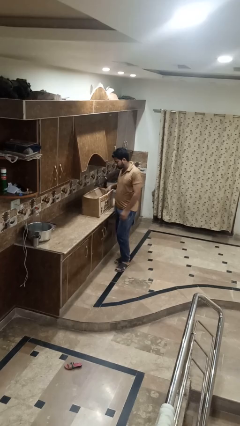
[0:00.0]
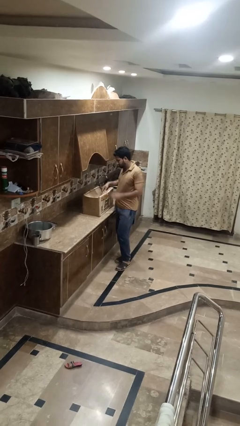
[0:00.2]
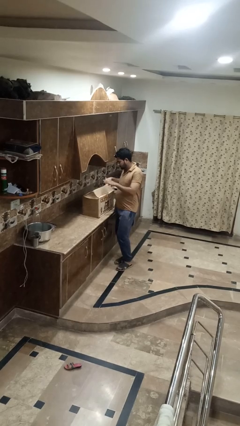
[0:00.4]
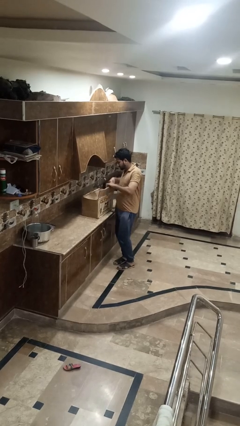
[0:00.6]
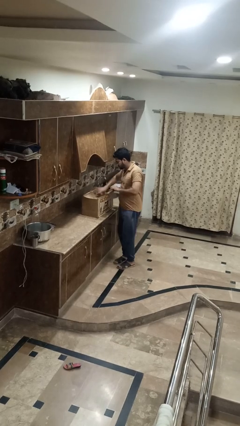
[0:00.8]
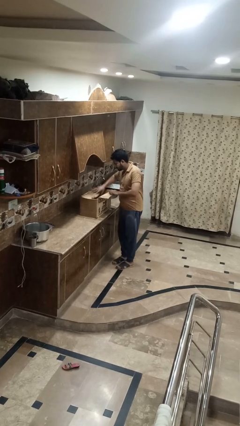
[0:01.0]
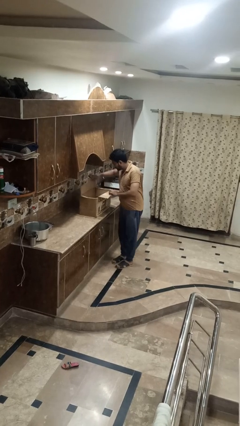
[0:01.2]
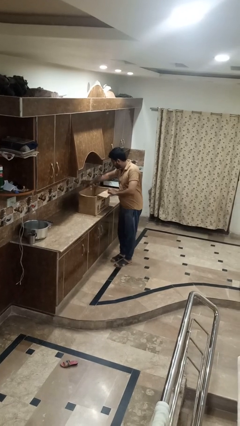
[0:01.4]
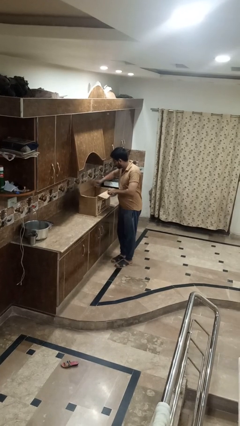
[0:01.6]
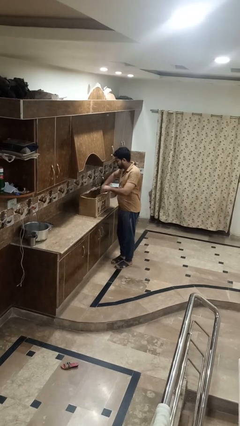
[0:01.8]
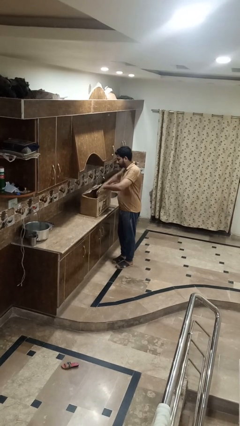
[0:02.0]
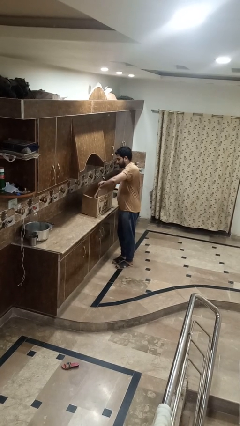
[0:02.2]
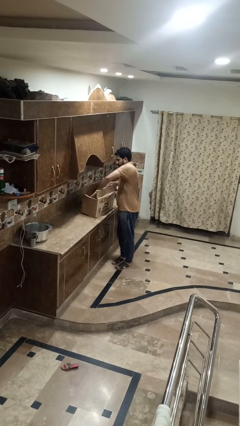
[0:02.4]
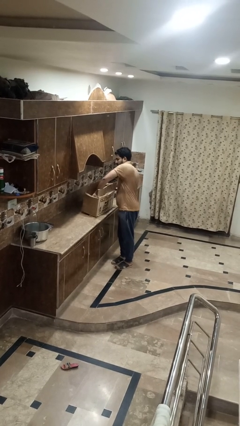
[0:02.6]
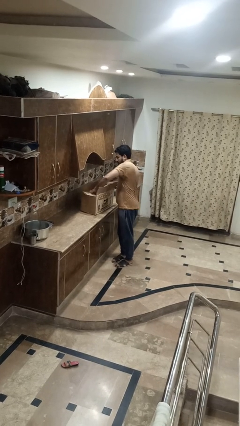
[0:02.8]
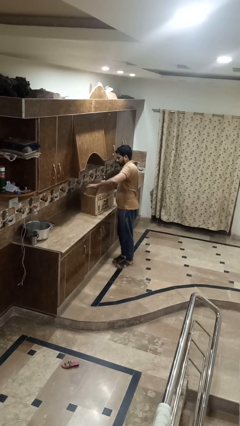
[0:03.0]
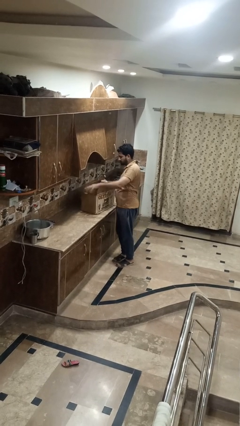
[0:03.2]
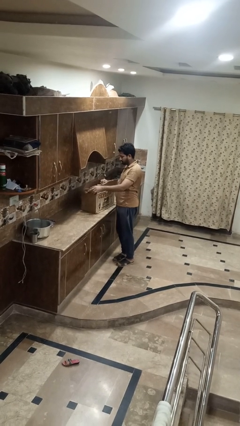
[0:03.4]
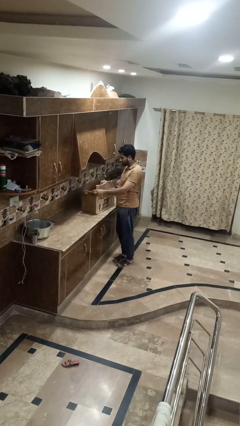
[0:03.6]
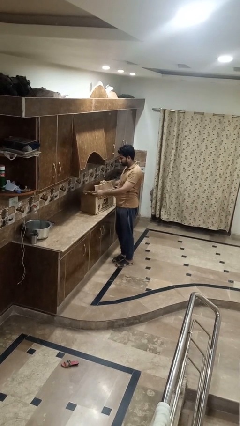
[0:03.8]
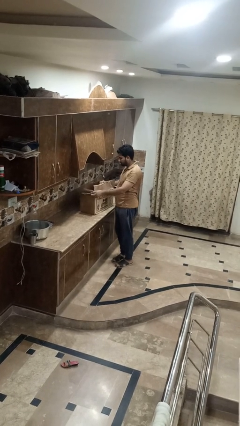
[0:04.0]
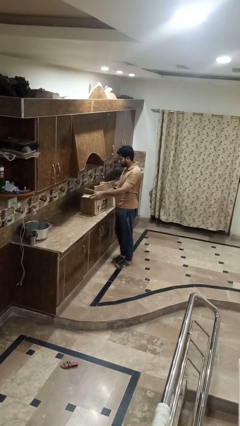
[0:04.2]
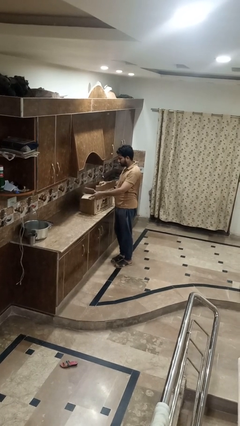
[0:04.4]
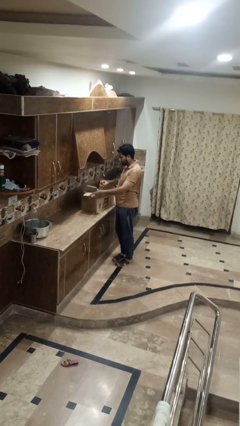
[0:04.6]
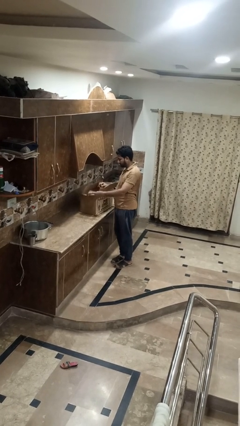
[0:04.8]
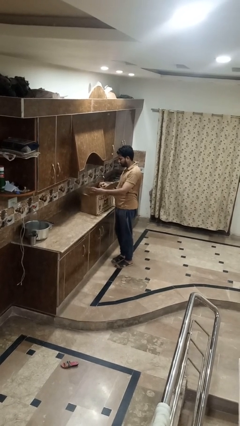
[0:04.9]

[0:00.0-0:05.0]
person opens box

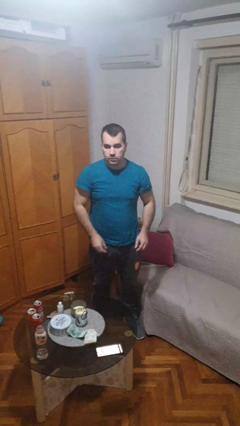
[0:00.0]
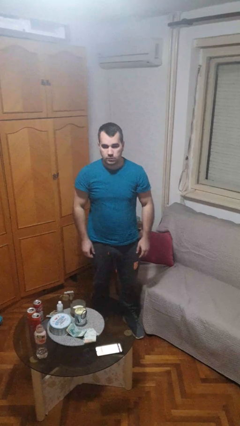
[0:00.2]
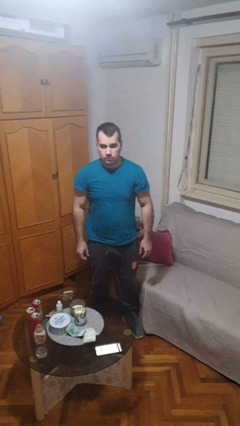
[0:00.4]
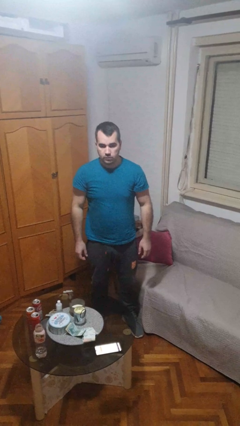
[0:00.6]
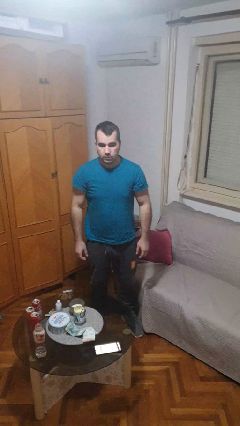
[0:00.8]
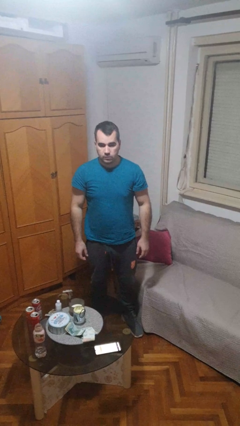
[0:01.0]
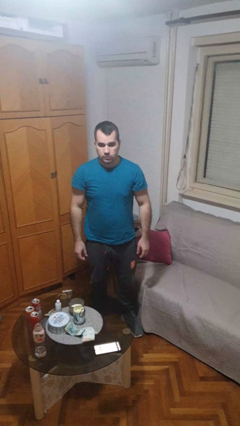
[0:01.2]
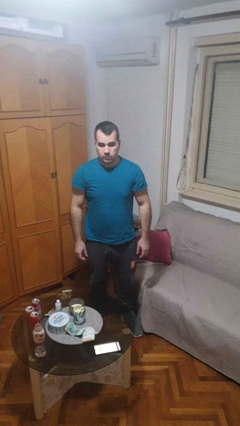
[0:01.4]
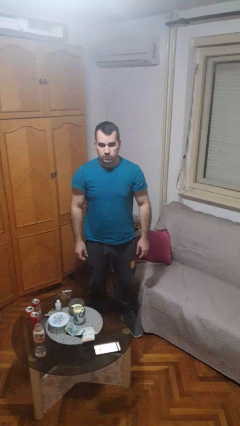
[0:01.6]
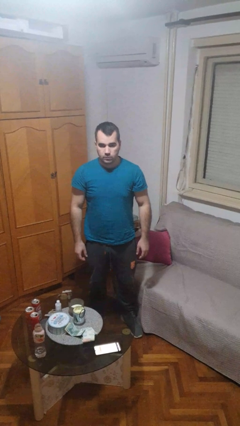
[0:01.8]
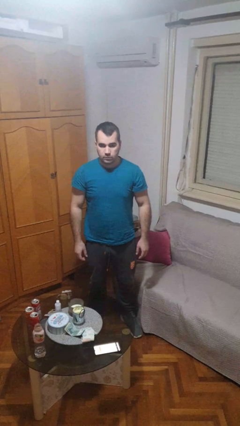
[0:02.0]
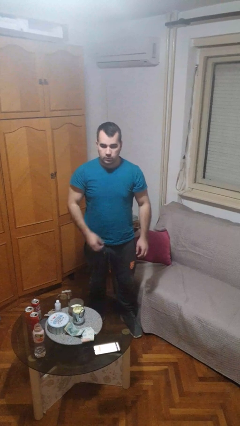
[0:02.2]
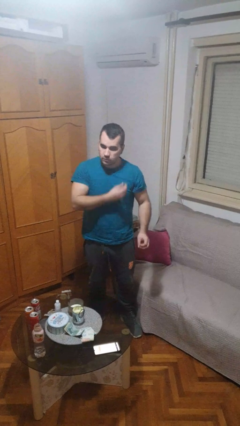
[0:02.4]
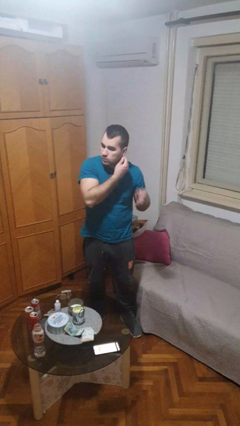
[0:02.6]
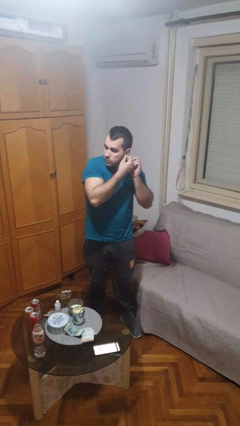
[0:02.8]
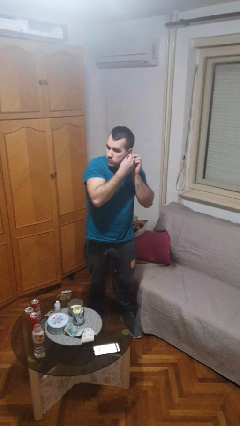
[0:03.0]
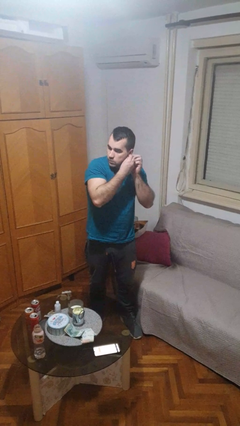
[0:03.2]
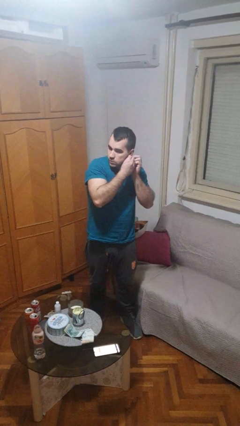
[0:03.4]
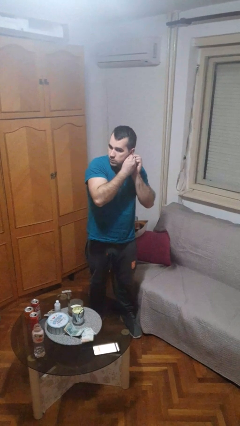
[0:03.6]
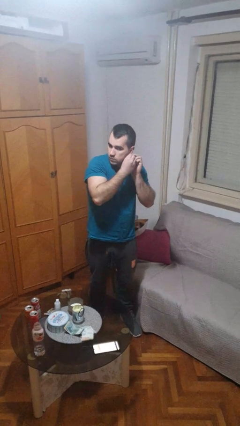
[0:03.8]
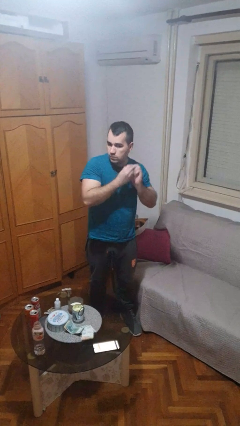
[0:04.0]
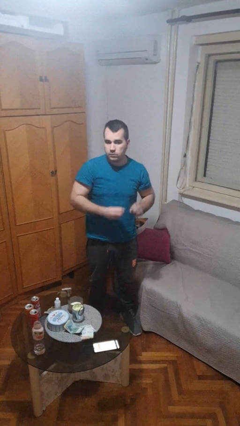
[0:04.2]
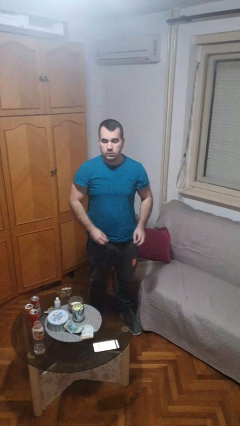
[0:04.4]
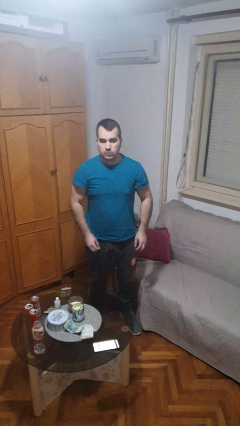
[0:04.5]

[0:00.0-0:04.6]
person takes off earrings

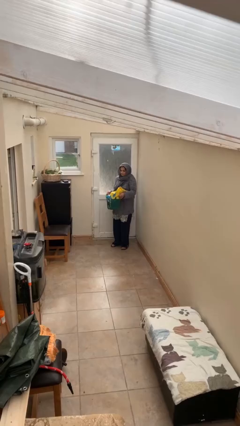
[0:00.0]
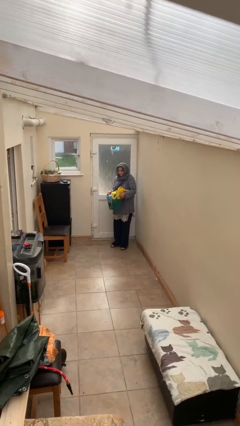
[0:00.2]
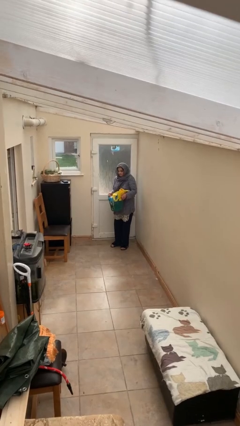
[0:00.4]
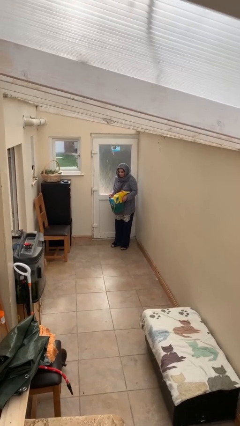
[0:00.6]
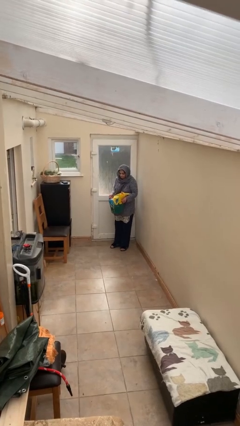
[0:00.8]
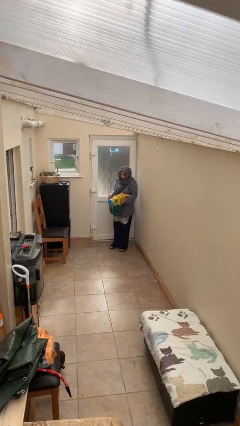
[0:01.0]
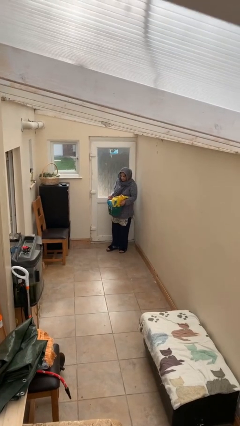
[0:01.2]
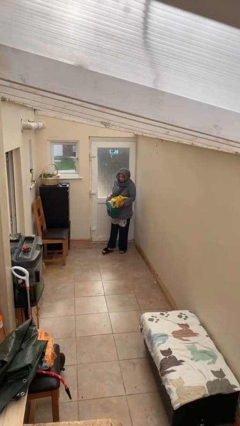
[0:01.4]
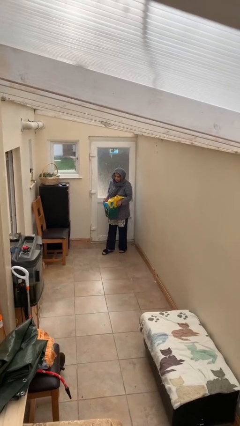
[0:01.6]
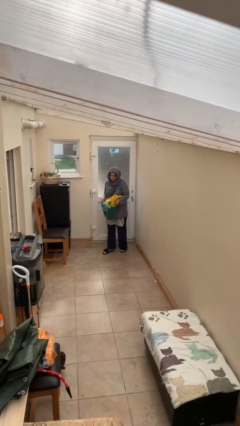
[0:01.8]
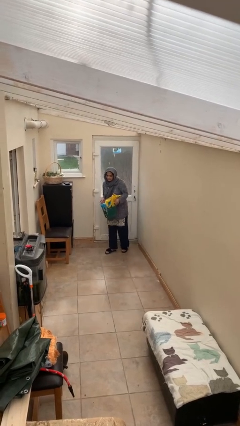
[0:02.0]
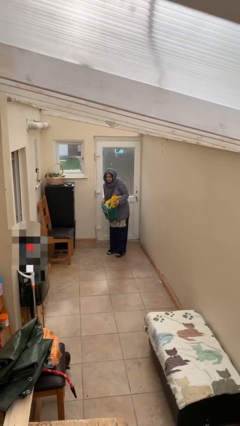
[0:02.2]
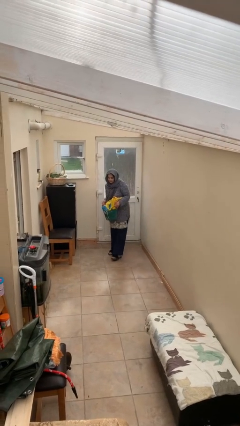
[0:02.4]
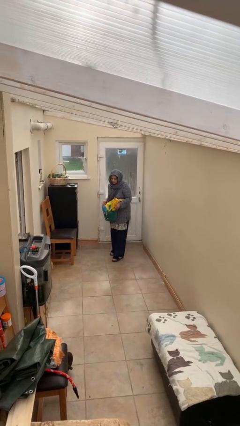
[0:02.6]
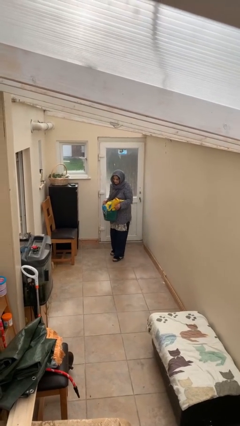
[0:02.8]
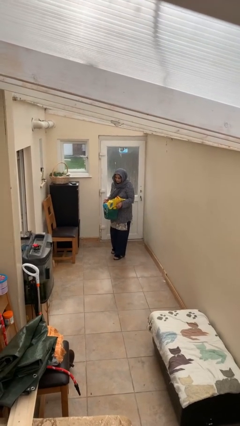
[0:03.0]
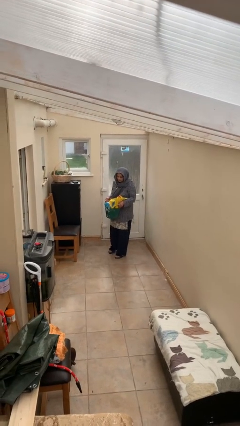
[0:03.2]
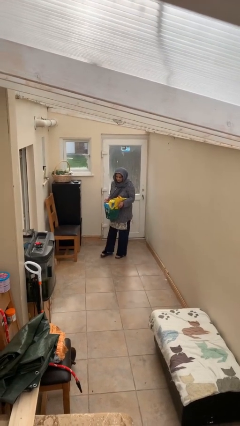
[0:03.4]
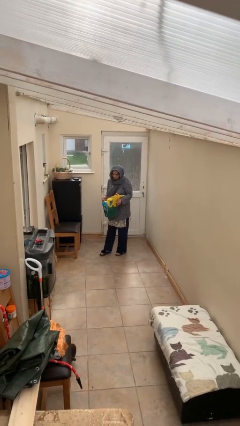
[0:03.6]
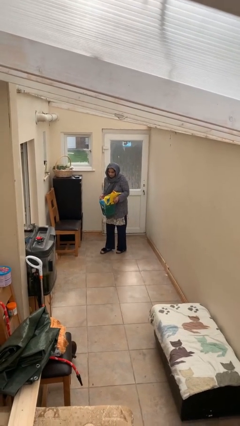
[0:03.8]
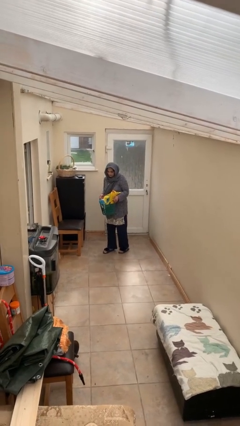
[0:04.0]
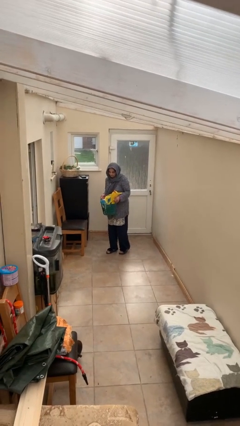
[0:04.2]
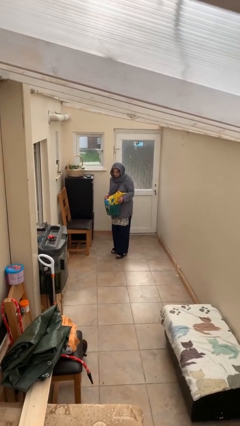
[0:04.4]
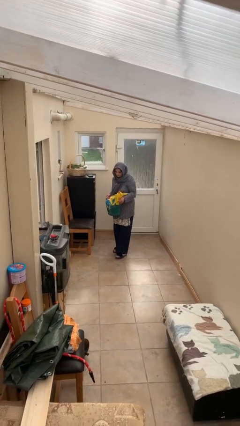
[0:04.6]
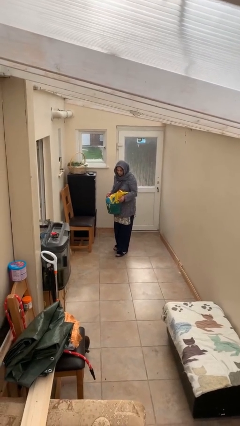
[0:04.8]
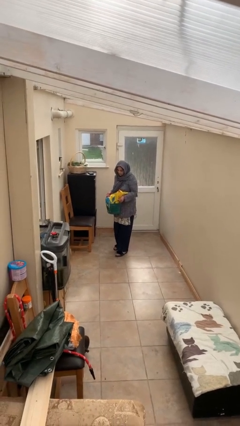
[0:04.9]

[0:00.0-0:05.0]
person carries heavy object

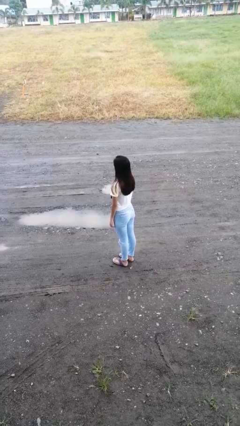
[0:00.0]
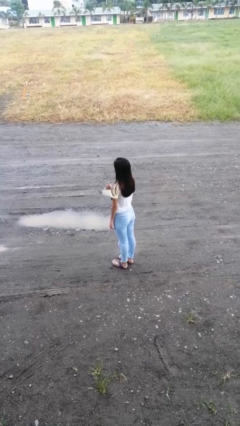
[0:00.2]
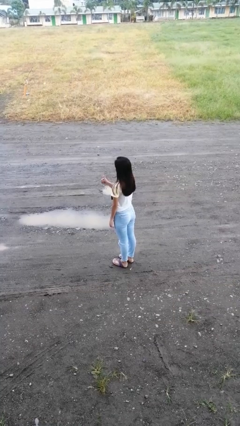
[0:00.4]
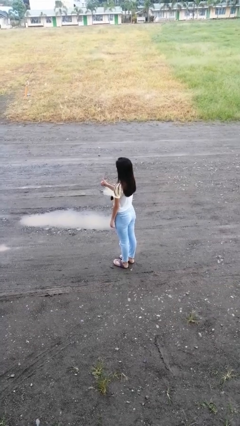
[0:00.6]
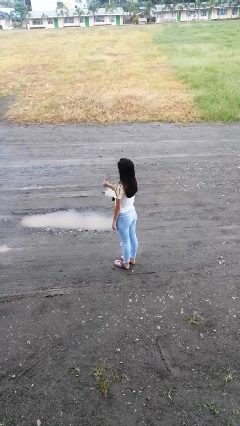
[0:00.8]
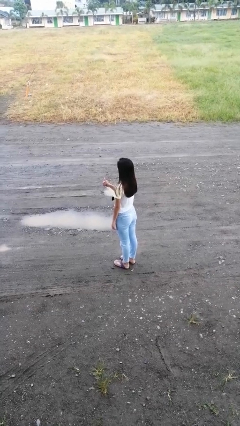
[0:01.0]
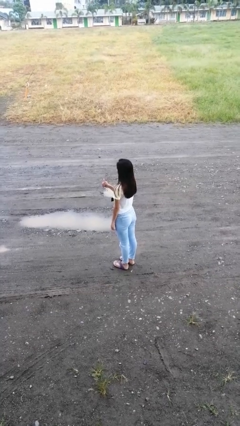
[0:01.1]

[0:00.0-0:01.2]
person gestures thumbs up

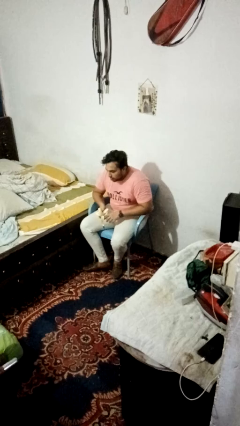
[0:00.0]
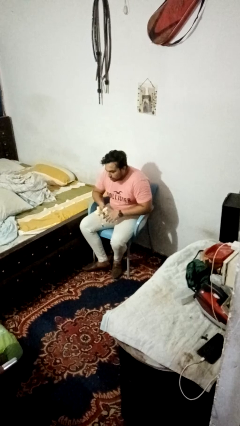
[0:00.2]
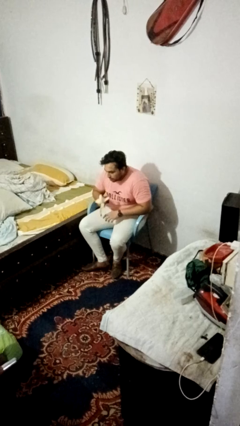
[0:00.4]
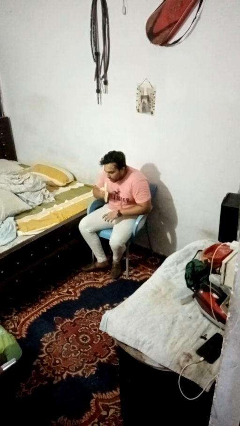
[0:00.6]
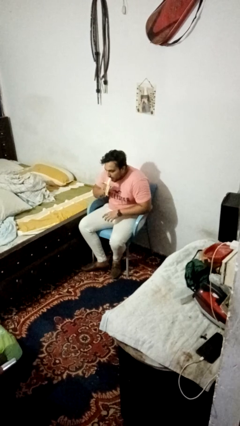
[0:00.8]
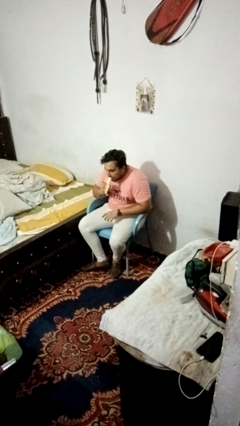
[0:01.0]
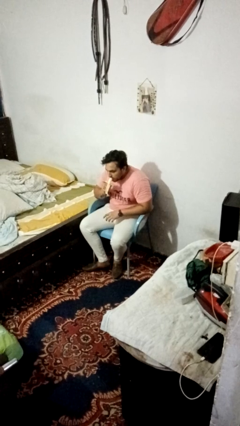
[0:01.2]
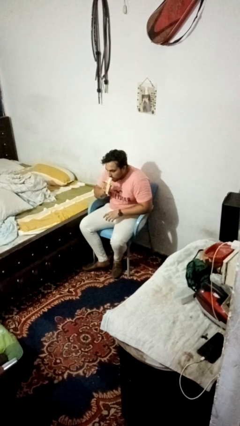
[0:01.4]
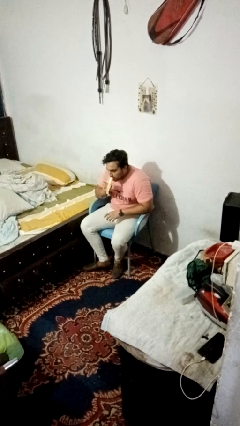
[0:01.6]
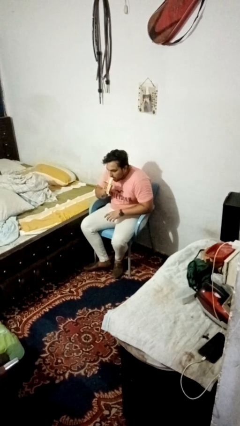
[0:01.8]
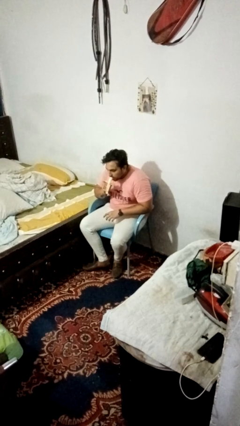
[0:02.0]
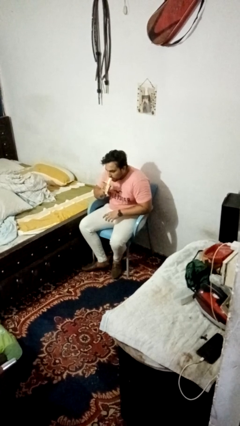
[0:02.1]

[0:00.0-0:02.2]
person eats banana

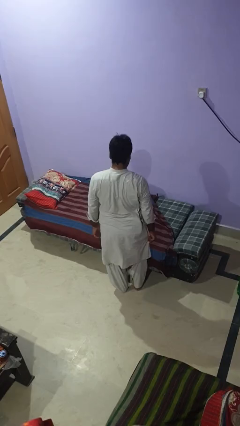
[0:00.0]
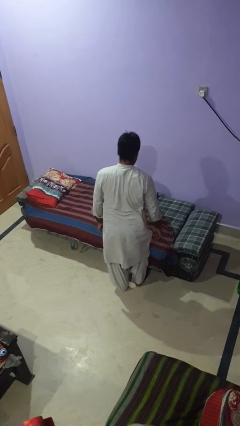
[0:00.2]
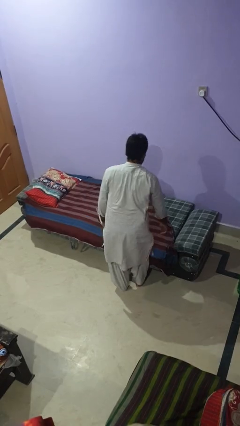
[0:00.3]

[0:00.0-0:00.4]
person makes bed
